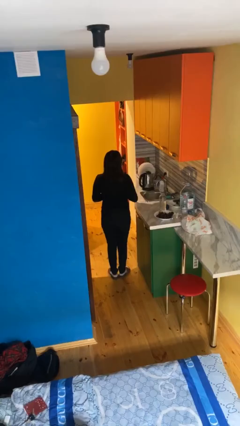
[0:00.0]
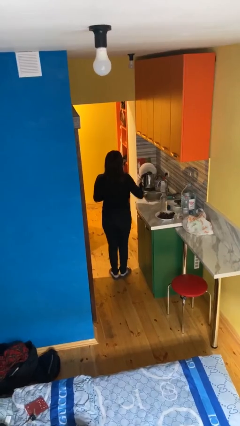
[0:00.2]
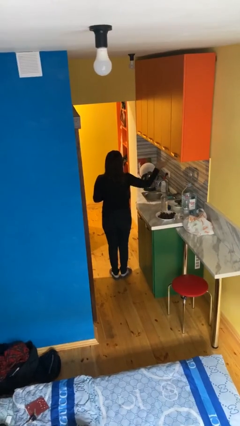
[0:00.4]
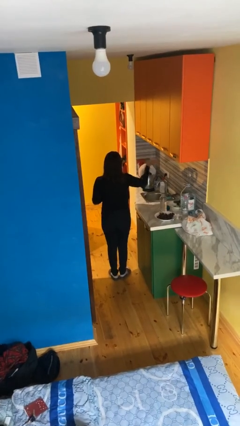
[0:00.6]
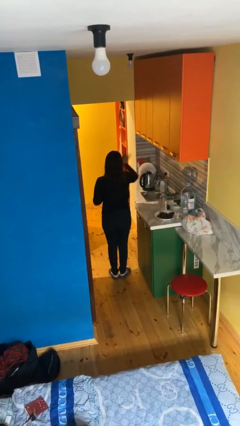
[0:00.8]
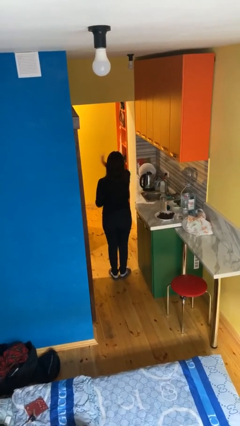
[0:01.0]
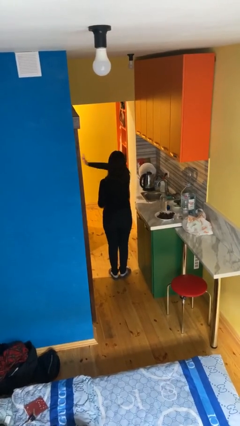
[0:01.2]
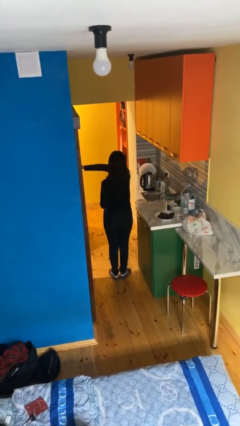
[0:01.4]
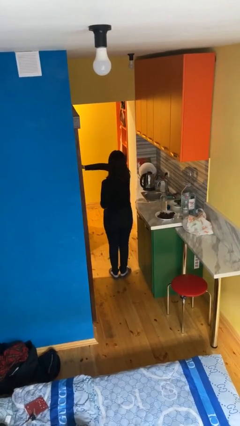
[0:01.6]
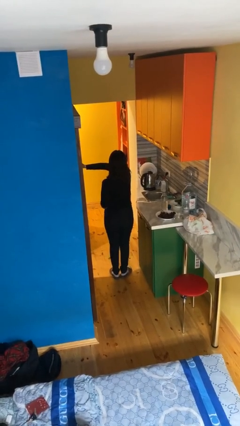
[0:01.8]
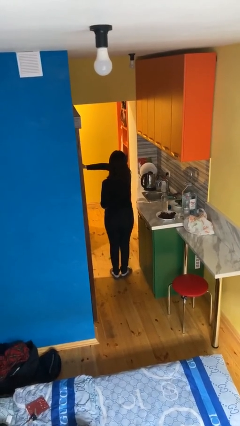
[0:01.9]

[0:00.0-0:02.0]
person gestures swipe left

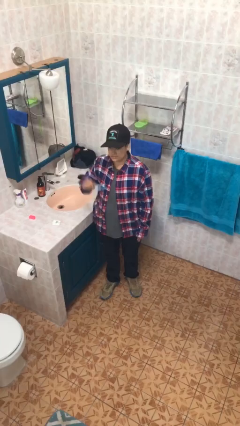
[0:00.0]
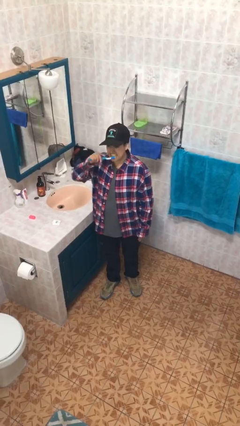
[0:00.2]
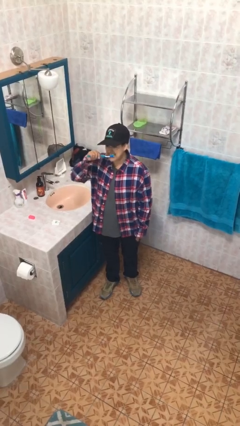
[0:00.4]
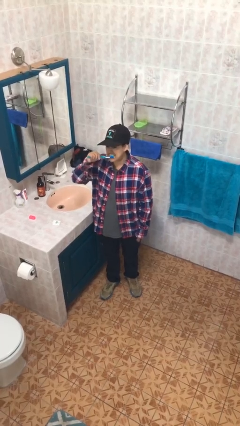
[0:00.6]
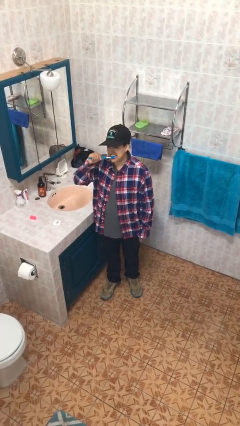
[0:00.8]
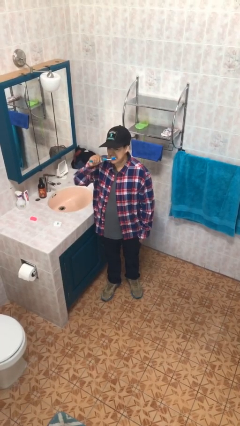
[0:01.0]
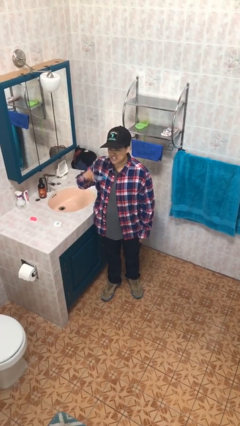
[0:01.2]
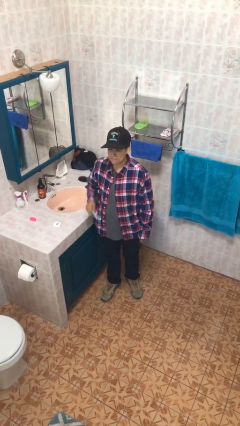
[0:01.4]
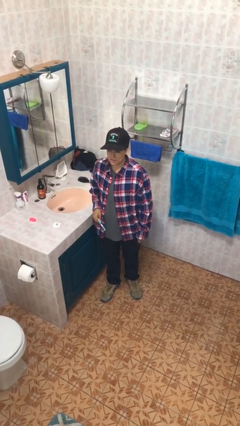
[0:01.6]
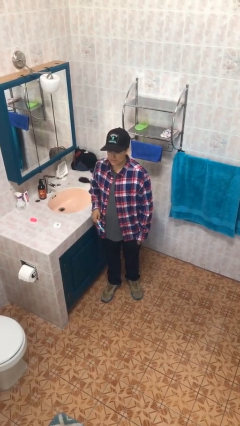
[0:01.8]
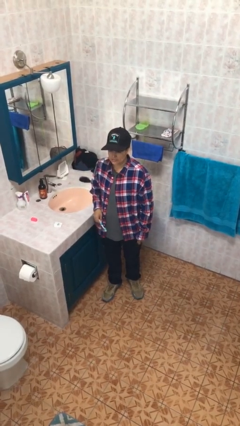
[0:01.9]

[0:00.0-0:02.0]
person brushes teeth

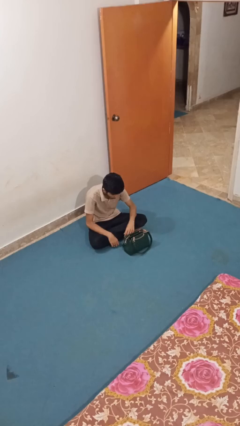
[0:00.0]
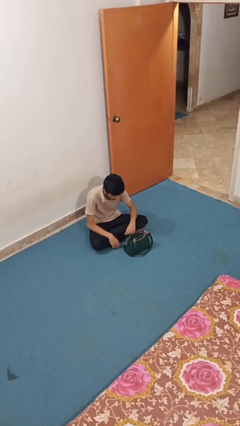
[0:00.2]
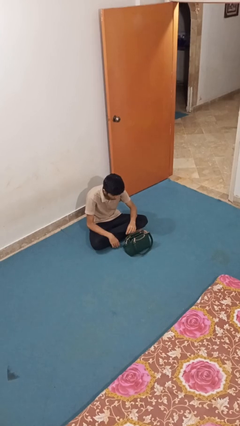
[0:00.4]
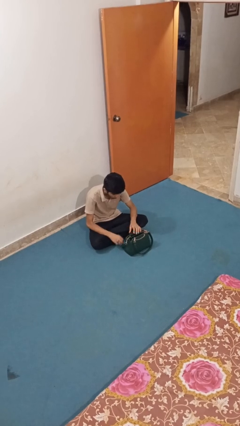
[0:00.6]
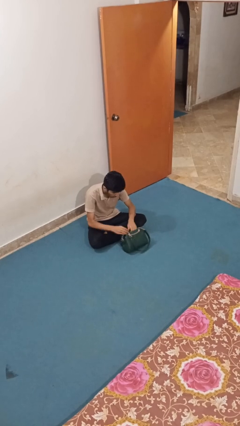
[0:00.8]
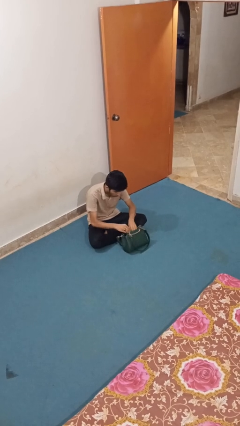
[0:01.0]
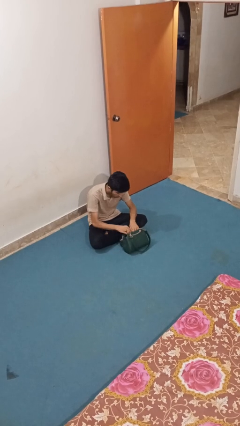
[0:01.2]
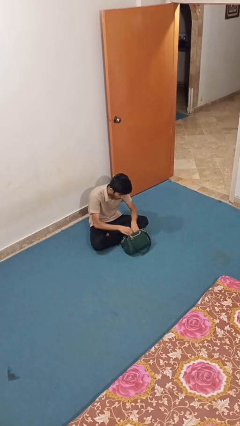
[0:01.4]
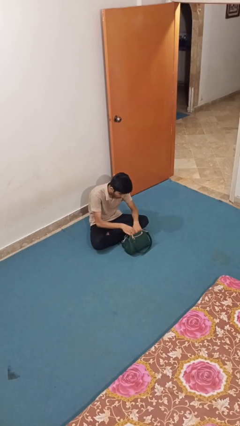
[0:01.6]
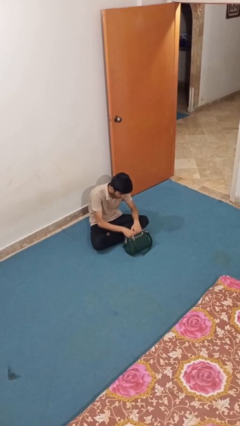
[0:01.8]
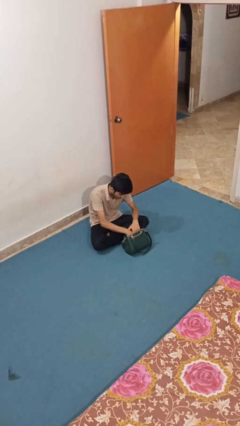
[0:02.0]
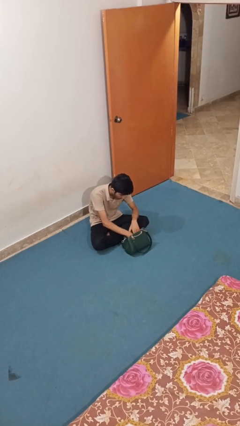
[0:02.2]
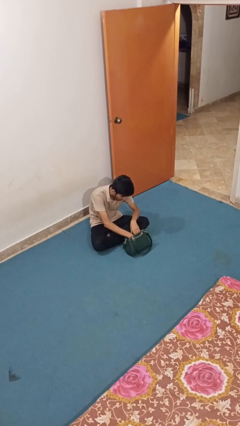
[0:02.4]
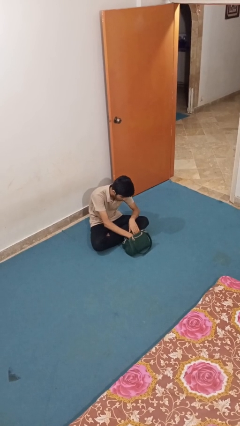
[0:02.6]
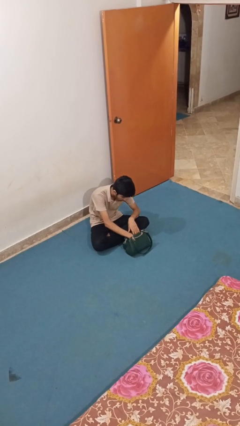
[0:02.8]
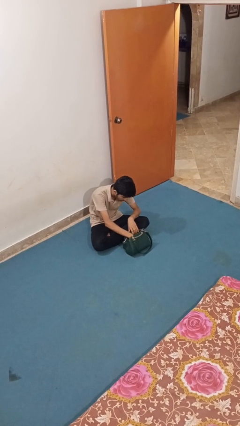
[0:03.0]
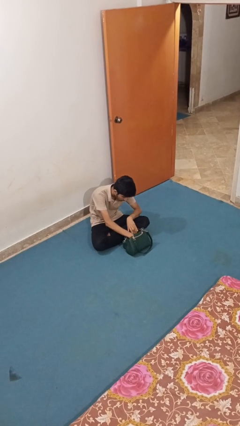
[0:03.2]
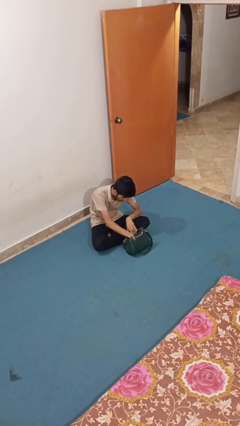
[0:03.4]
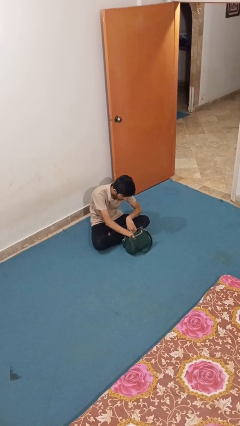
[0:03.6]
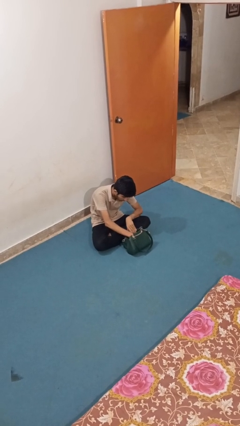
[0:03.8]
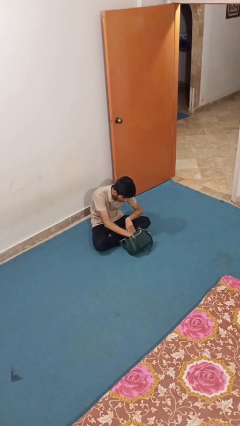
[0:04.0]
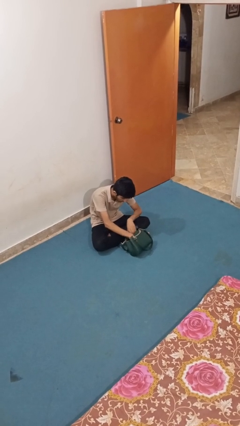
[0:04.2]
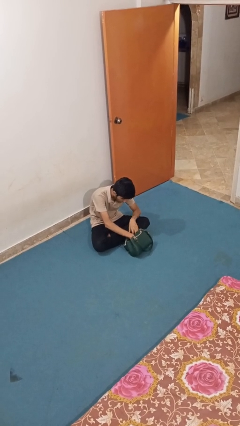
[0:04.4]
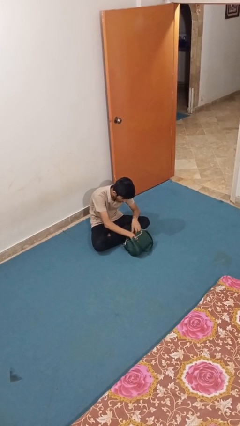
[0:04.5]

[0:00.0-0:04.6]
person searches in purse

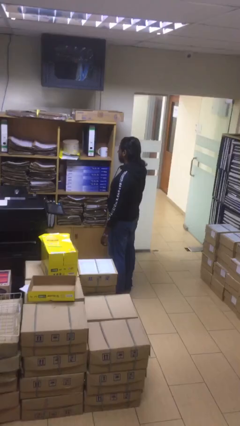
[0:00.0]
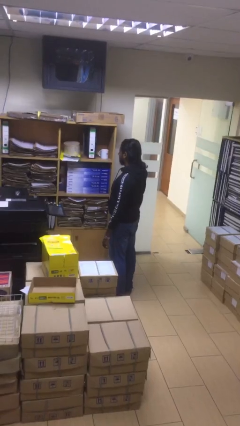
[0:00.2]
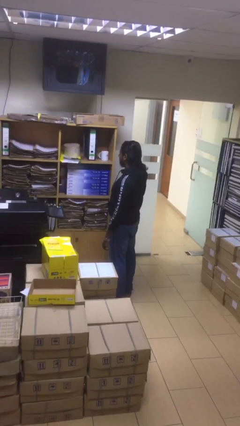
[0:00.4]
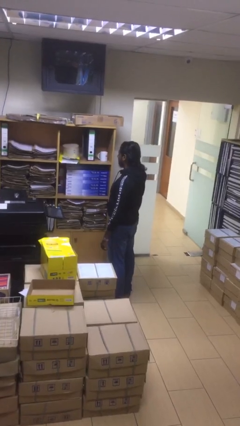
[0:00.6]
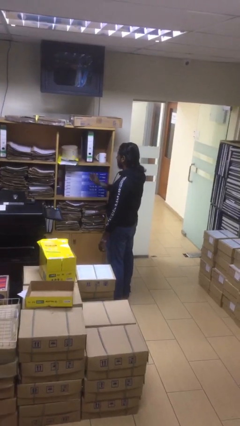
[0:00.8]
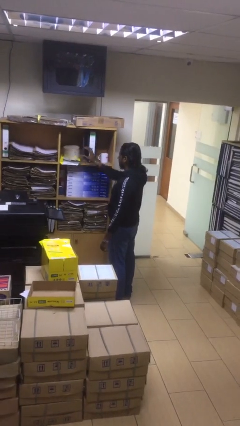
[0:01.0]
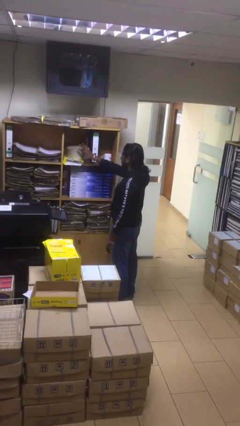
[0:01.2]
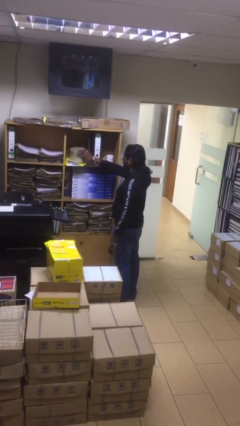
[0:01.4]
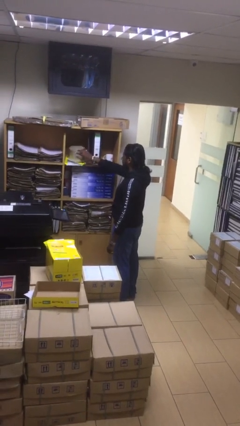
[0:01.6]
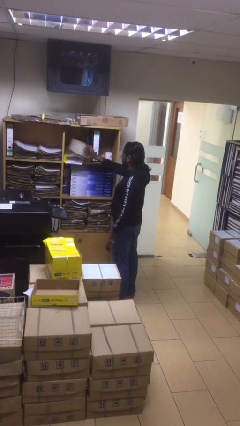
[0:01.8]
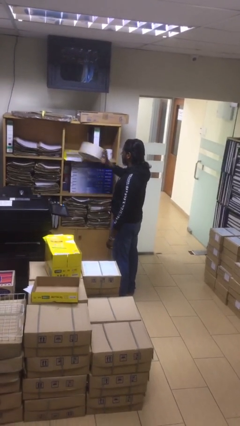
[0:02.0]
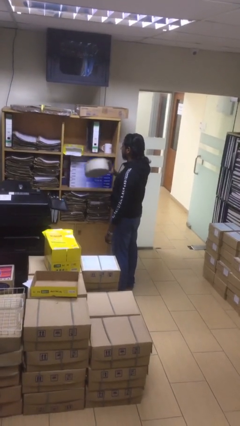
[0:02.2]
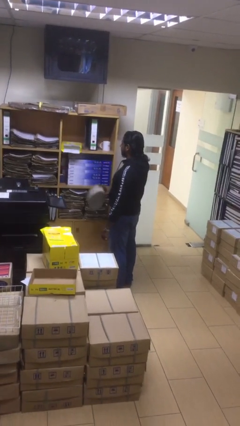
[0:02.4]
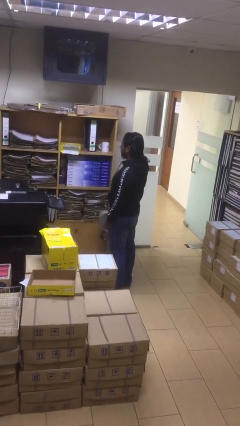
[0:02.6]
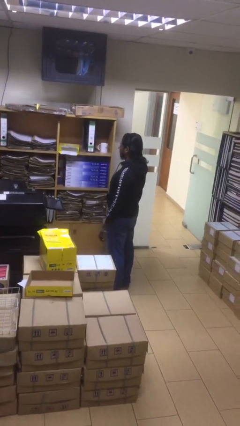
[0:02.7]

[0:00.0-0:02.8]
person picks up object from cabinet

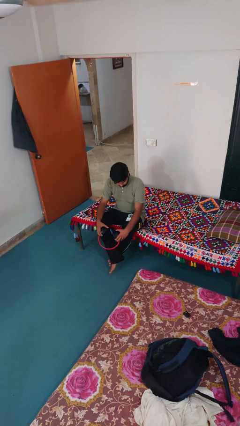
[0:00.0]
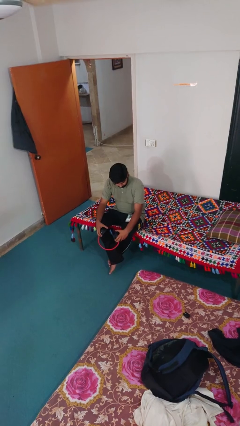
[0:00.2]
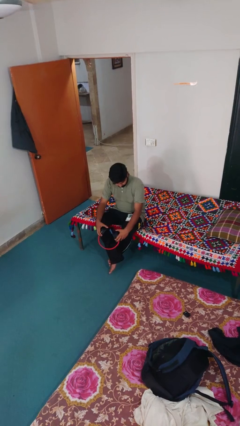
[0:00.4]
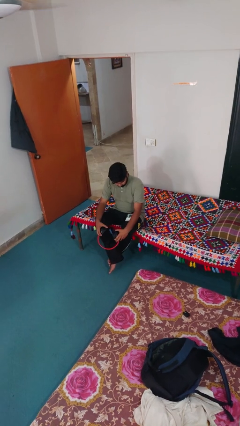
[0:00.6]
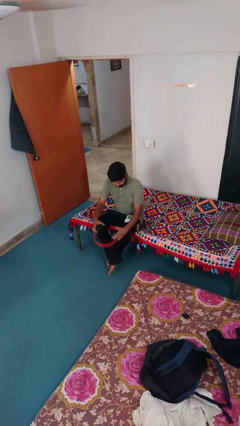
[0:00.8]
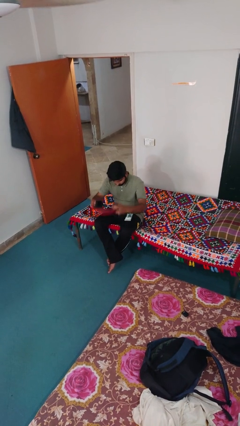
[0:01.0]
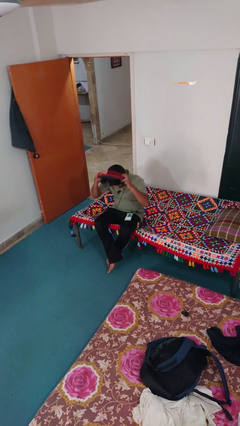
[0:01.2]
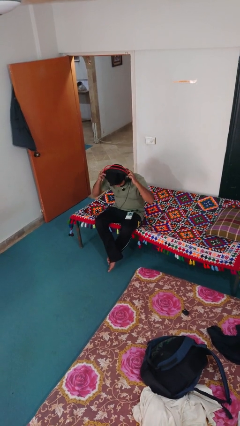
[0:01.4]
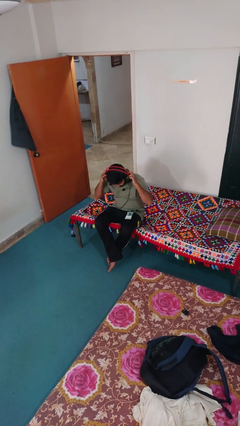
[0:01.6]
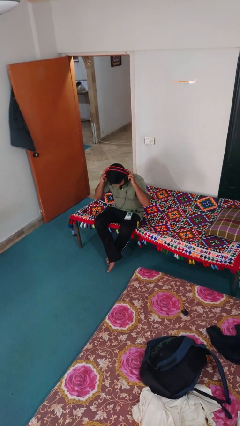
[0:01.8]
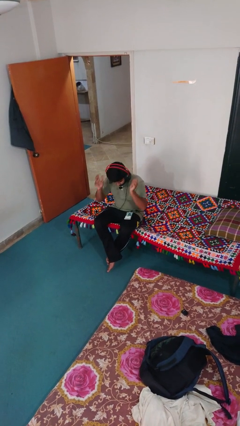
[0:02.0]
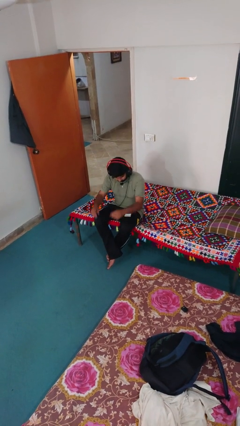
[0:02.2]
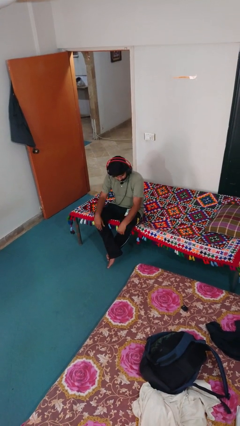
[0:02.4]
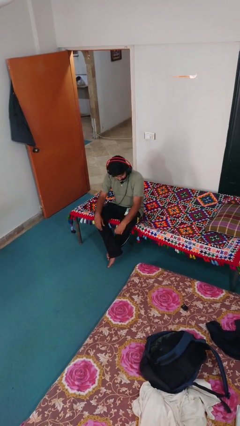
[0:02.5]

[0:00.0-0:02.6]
person puts on headphones

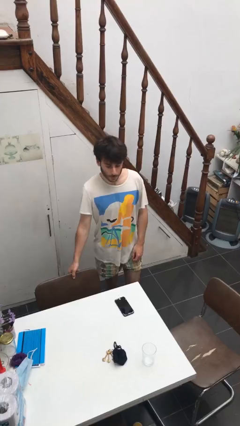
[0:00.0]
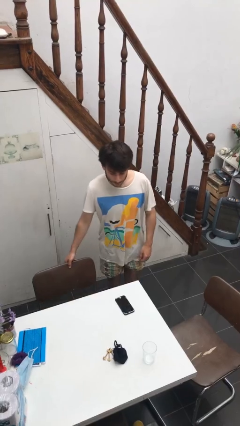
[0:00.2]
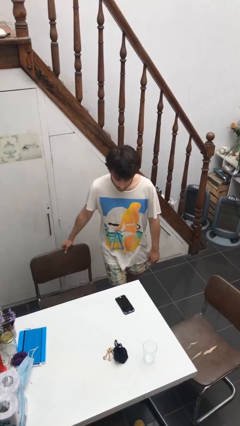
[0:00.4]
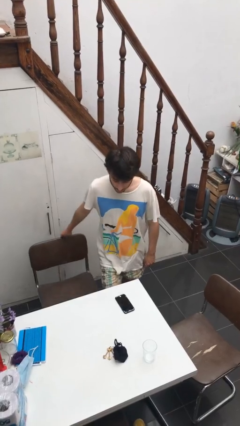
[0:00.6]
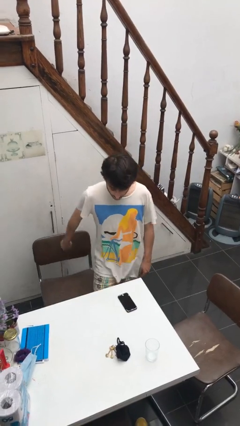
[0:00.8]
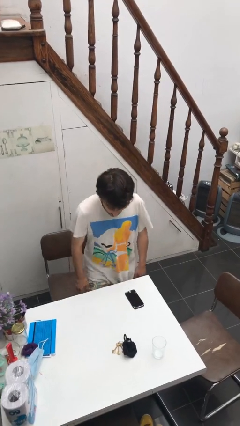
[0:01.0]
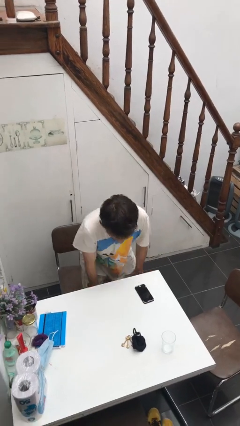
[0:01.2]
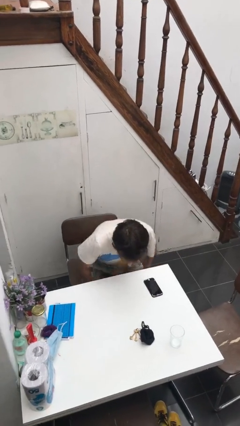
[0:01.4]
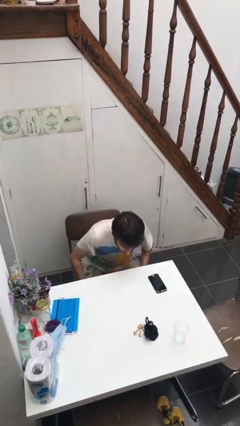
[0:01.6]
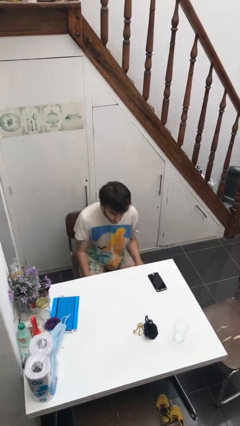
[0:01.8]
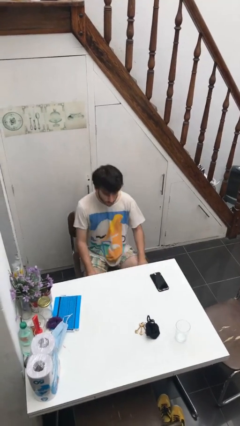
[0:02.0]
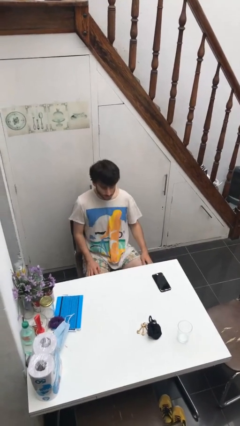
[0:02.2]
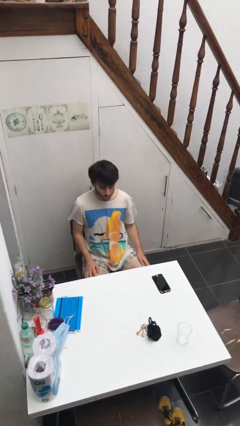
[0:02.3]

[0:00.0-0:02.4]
person sits down

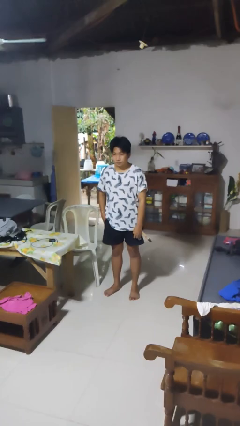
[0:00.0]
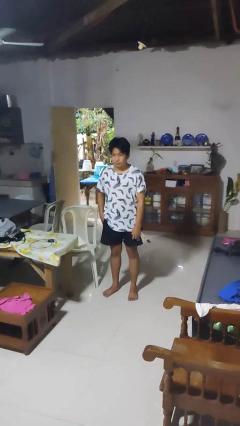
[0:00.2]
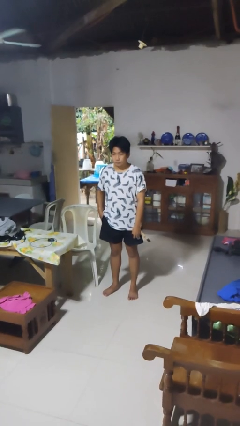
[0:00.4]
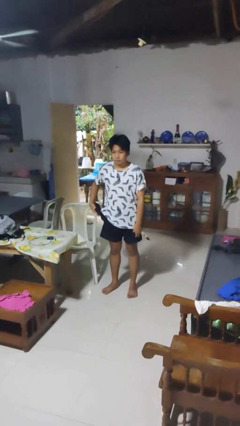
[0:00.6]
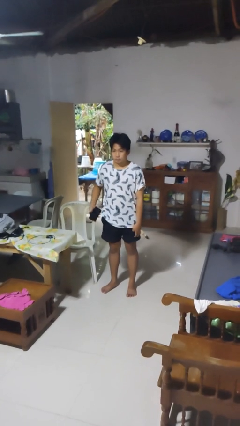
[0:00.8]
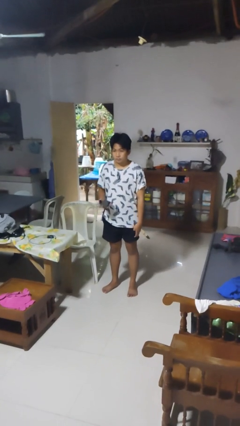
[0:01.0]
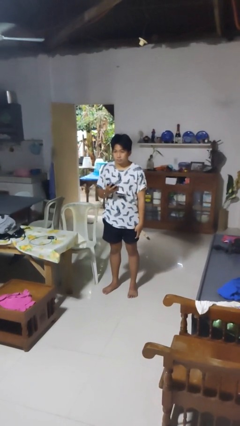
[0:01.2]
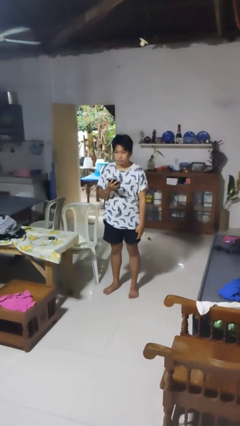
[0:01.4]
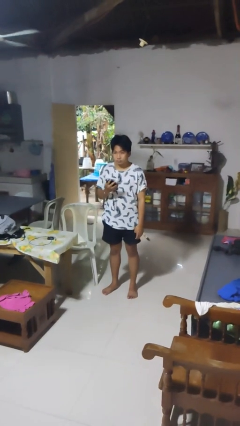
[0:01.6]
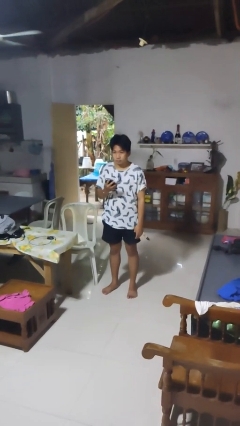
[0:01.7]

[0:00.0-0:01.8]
person takes phone from pocket
